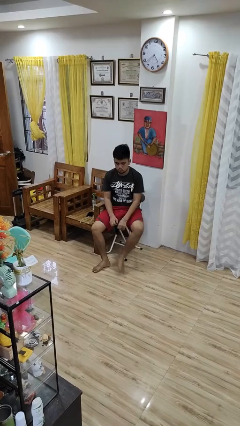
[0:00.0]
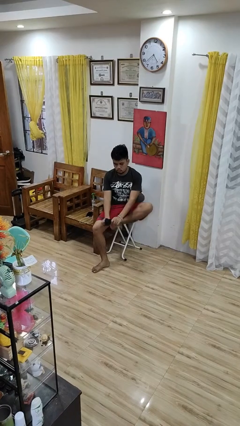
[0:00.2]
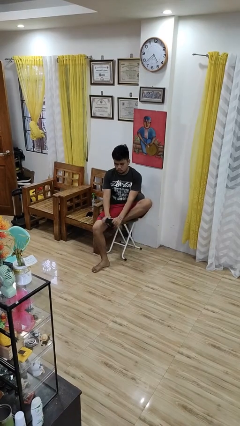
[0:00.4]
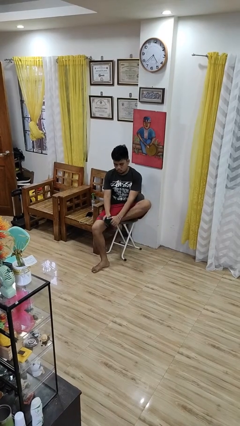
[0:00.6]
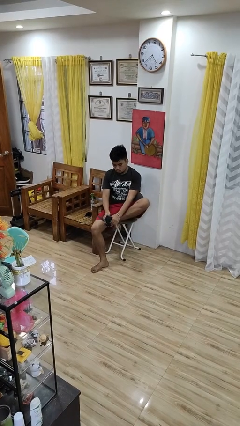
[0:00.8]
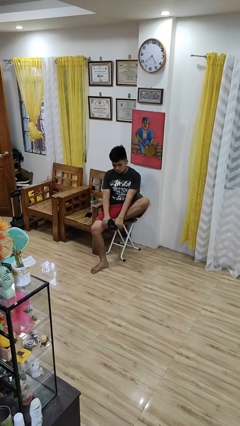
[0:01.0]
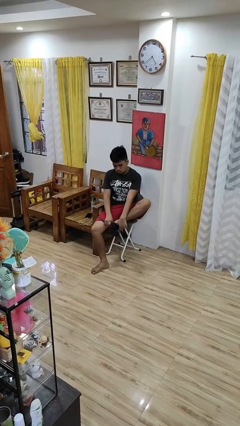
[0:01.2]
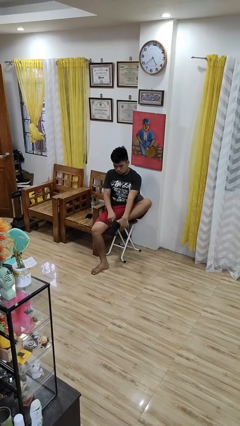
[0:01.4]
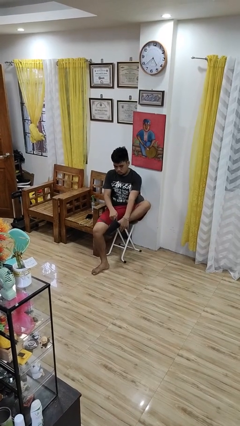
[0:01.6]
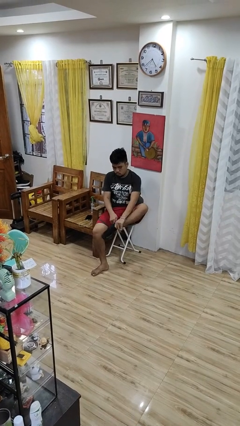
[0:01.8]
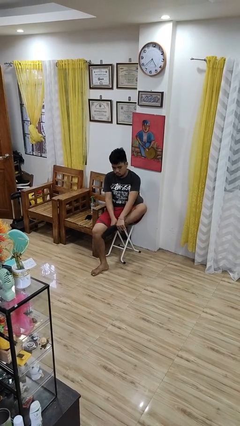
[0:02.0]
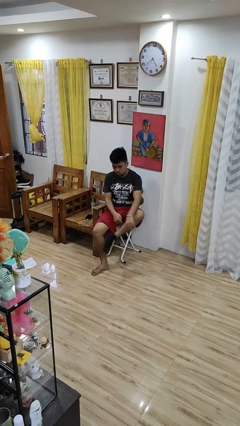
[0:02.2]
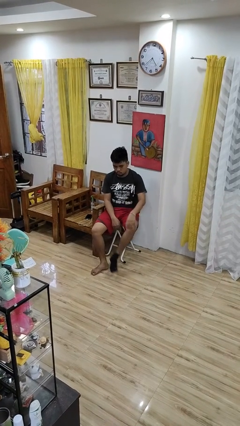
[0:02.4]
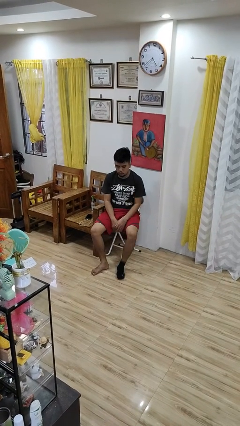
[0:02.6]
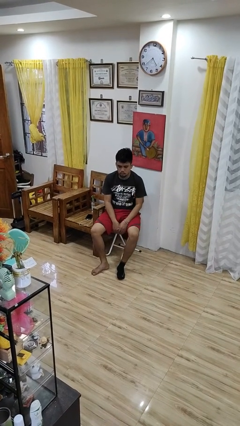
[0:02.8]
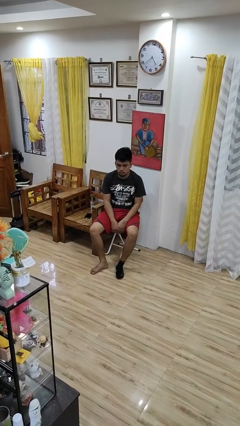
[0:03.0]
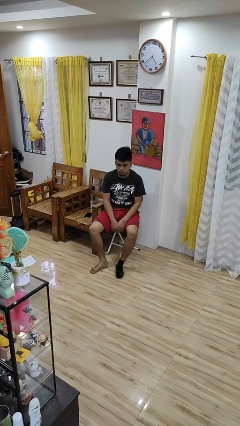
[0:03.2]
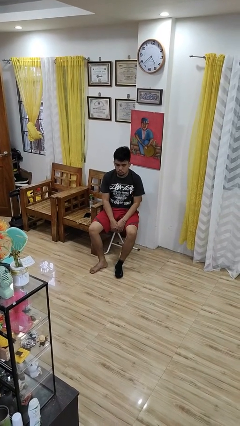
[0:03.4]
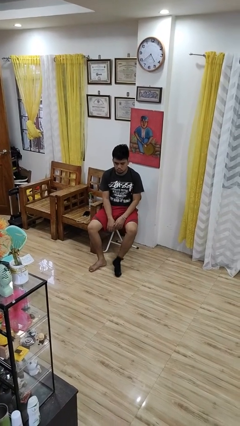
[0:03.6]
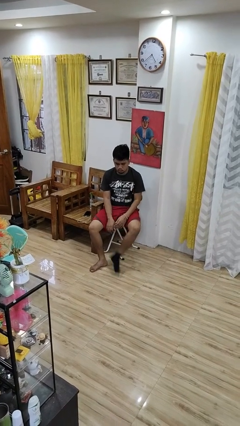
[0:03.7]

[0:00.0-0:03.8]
person puts on socks

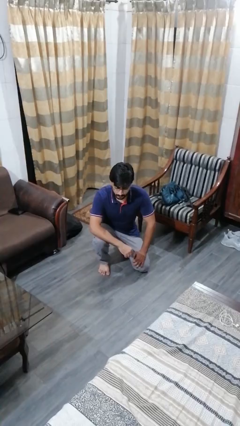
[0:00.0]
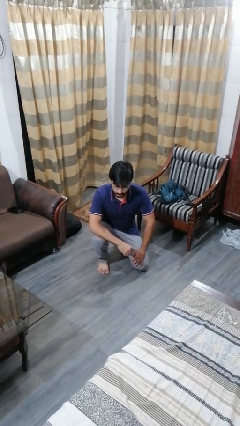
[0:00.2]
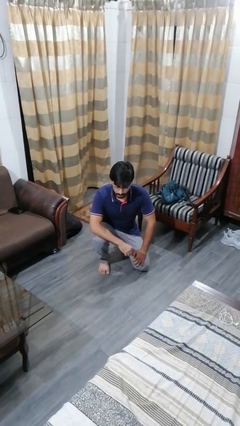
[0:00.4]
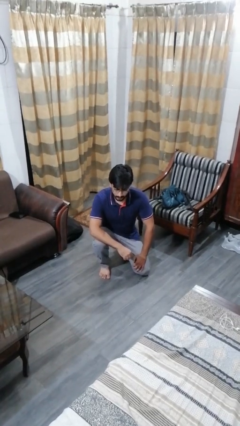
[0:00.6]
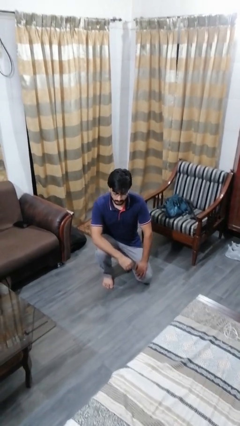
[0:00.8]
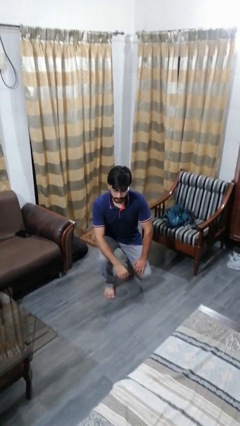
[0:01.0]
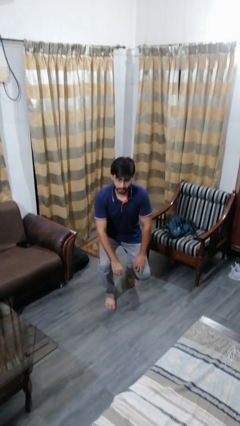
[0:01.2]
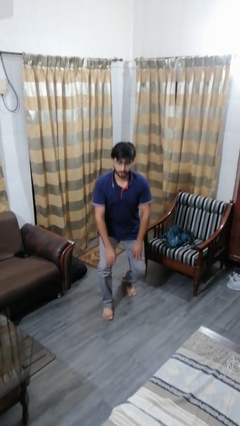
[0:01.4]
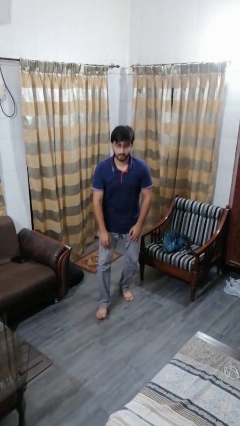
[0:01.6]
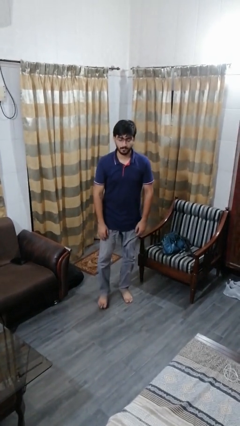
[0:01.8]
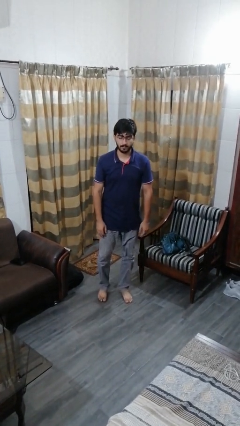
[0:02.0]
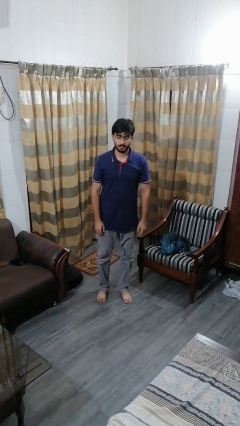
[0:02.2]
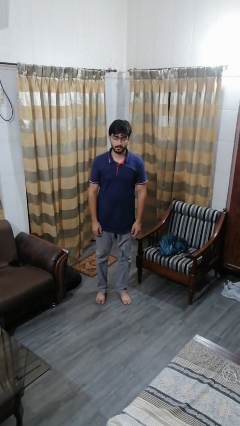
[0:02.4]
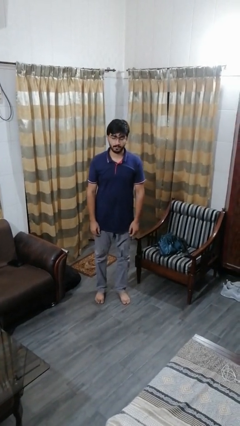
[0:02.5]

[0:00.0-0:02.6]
person stands up from floor

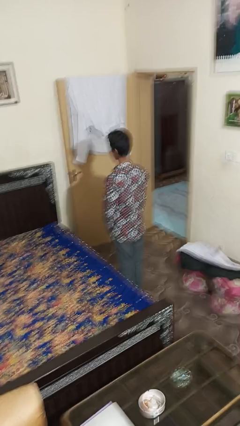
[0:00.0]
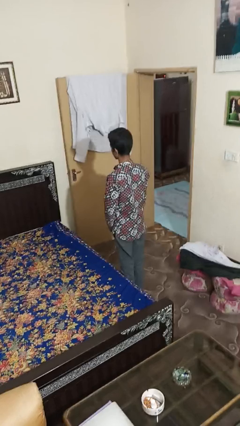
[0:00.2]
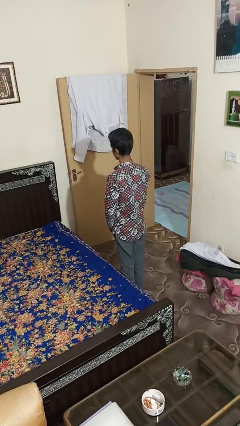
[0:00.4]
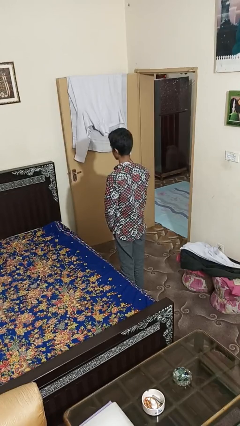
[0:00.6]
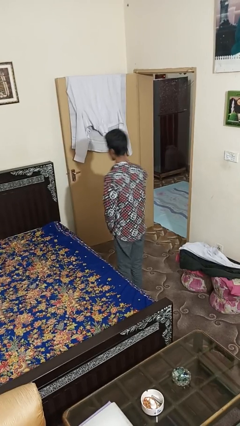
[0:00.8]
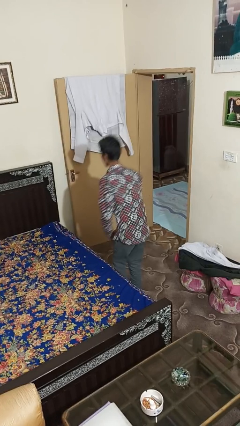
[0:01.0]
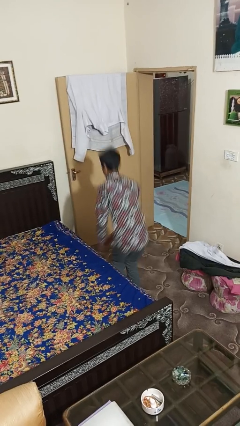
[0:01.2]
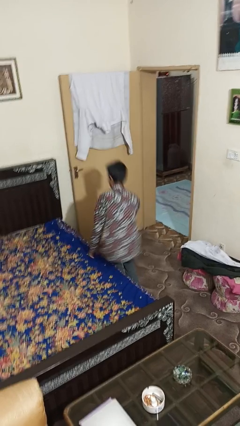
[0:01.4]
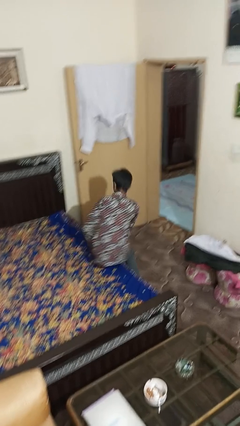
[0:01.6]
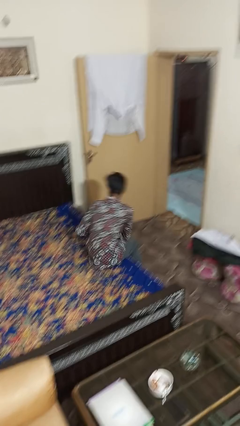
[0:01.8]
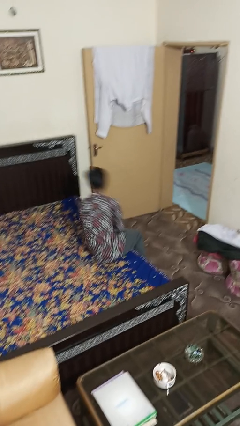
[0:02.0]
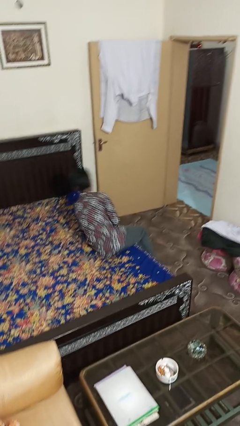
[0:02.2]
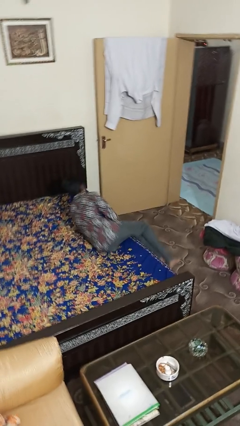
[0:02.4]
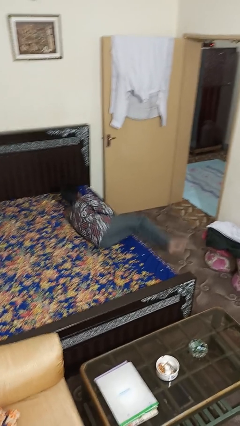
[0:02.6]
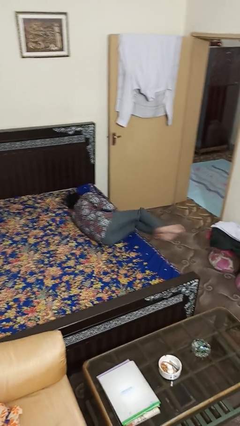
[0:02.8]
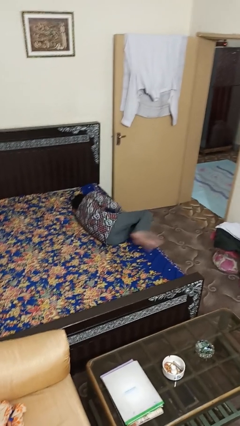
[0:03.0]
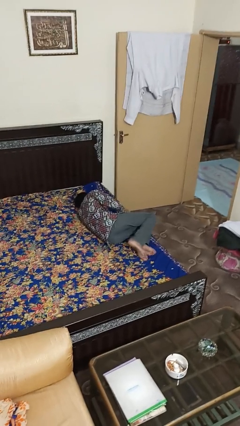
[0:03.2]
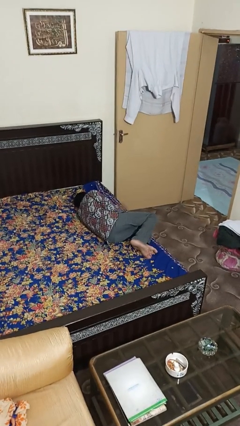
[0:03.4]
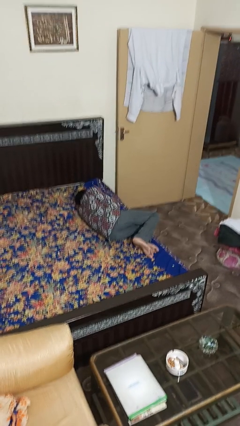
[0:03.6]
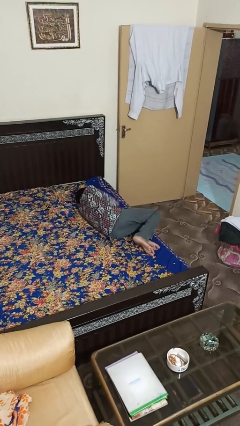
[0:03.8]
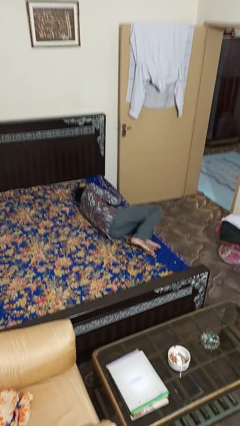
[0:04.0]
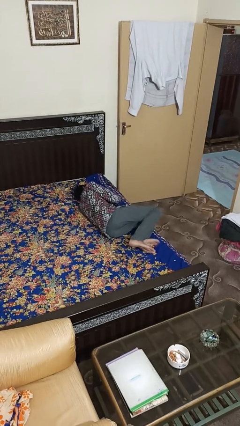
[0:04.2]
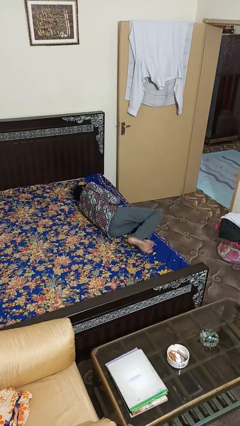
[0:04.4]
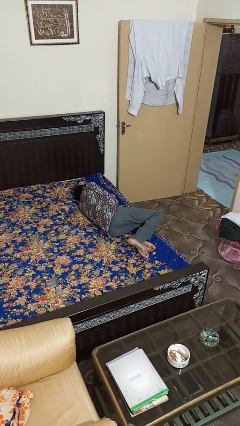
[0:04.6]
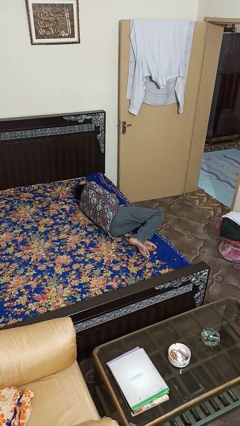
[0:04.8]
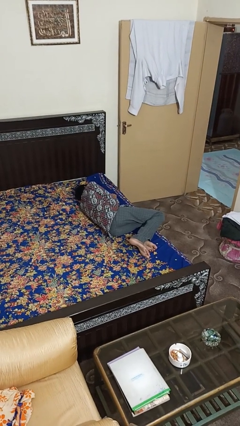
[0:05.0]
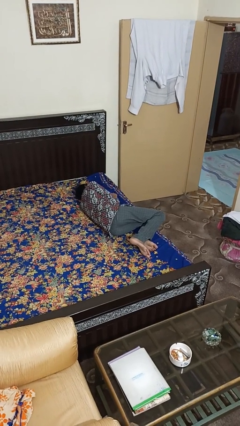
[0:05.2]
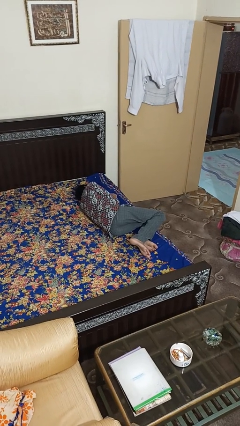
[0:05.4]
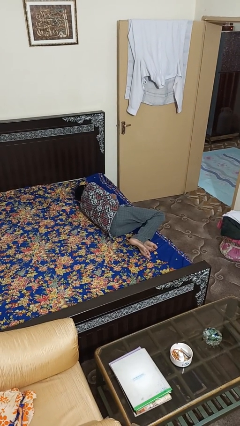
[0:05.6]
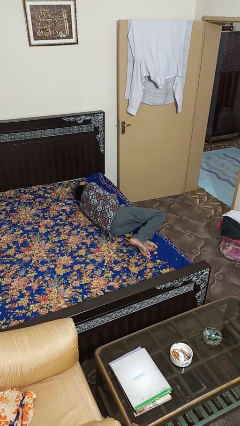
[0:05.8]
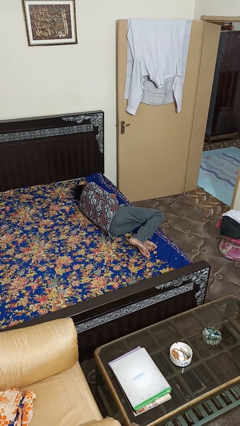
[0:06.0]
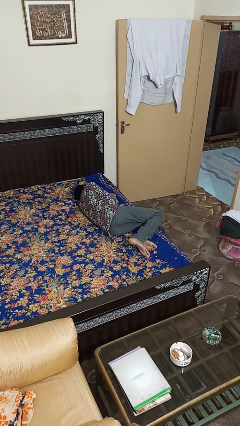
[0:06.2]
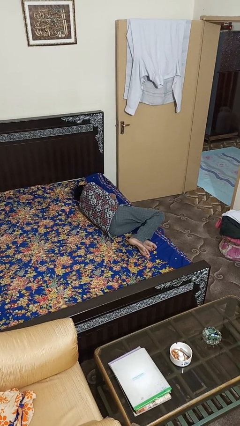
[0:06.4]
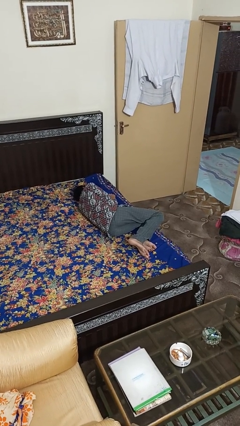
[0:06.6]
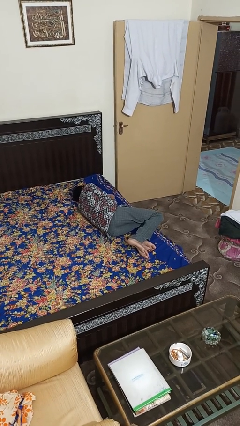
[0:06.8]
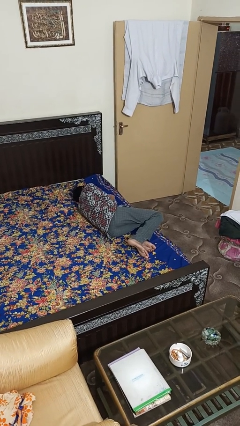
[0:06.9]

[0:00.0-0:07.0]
person lies down on bed

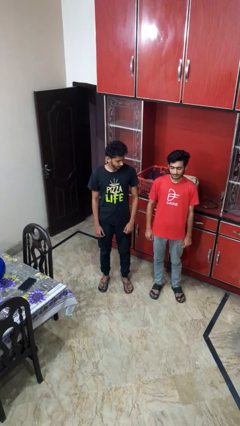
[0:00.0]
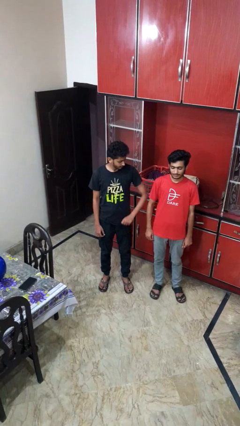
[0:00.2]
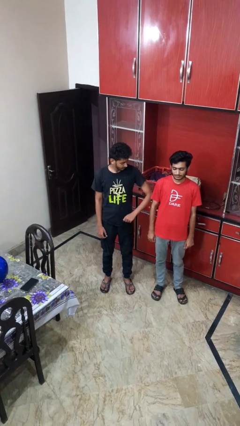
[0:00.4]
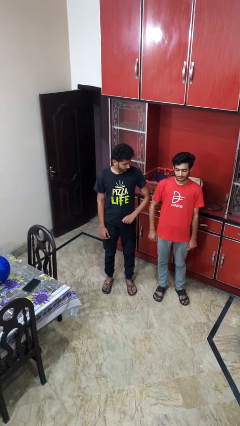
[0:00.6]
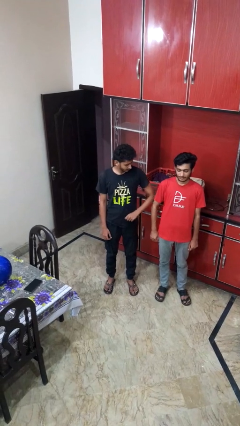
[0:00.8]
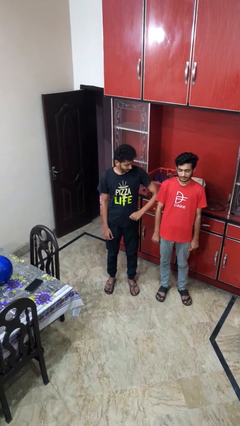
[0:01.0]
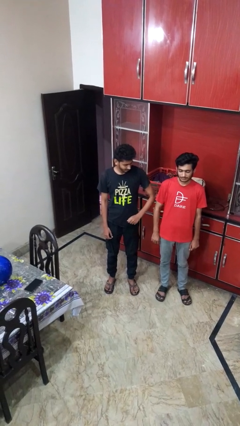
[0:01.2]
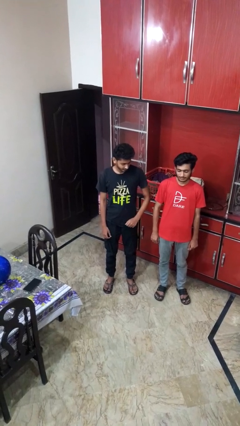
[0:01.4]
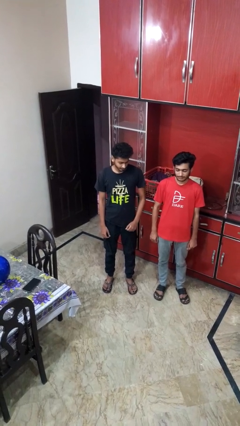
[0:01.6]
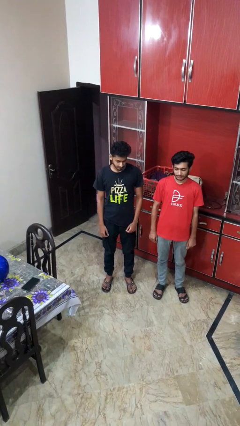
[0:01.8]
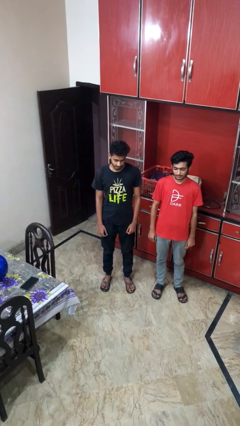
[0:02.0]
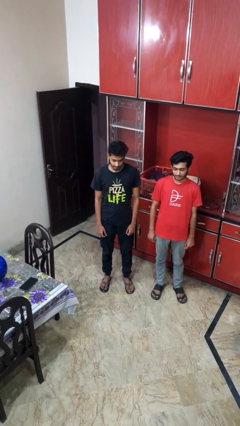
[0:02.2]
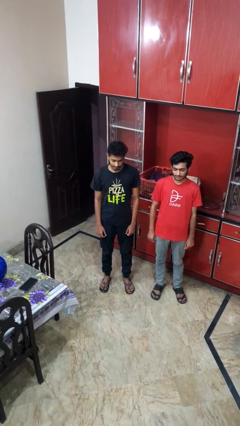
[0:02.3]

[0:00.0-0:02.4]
person nudges person with elbow

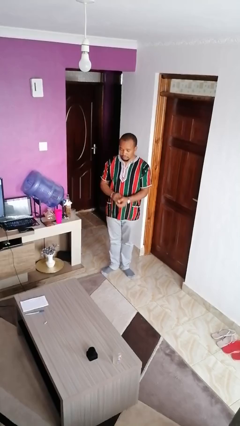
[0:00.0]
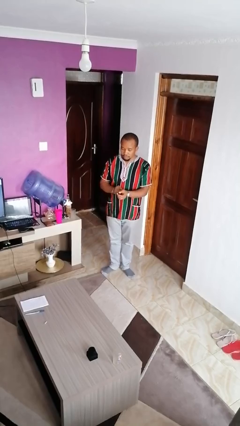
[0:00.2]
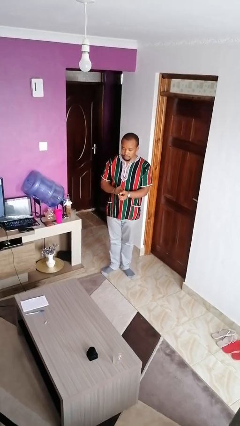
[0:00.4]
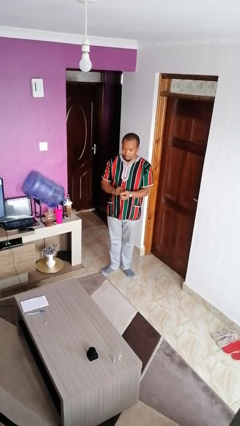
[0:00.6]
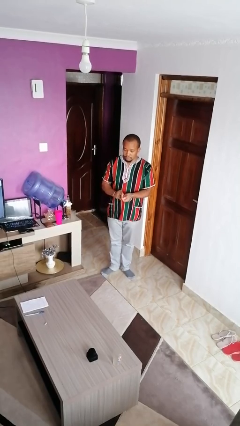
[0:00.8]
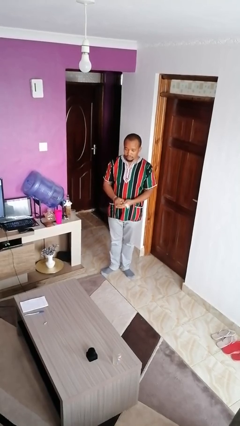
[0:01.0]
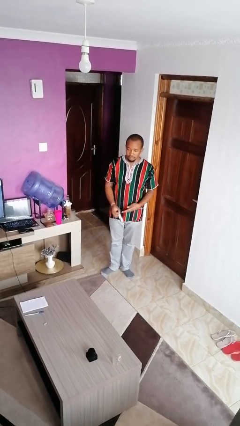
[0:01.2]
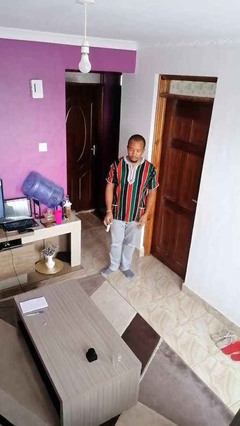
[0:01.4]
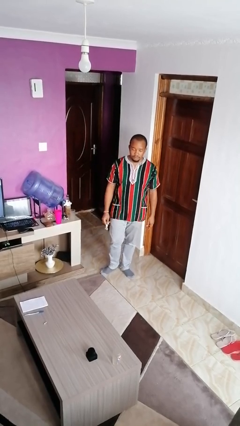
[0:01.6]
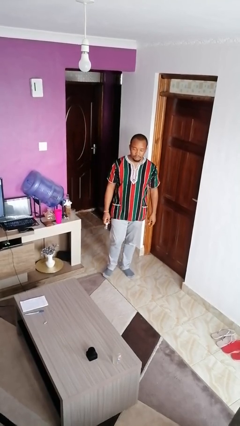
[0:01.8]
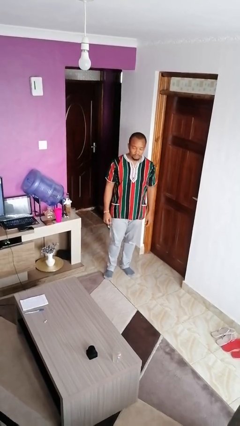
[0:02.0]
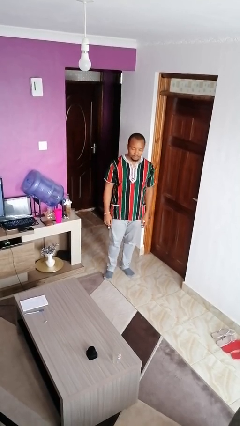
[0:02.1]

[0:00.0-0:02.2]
person takes off wristwatch
